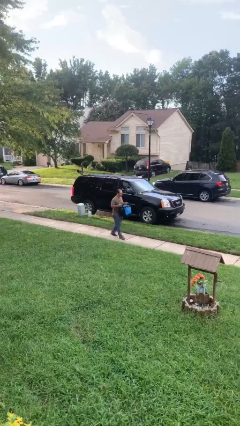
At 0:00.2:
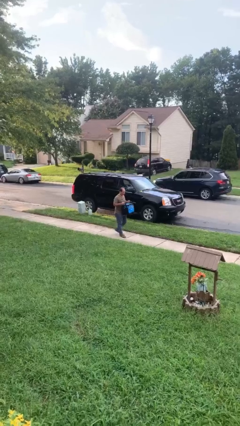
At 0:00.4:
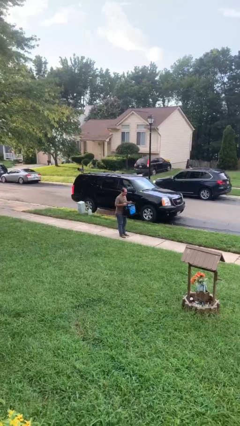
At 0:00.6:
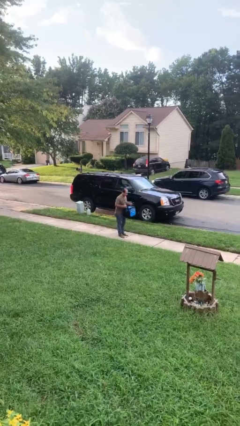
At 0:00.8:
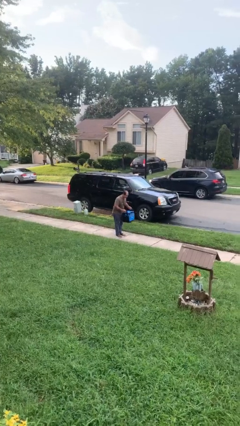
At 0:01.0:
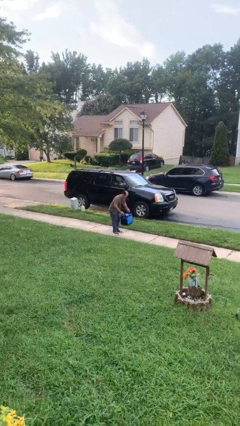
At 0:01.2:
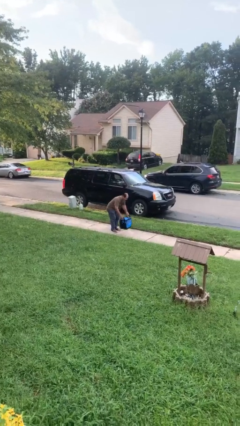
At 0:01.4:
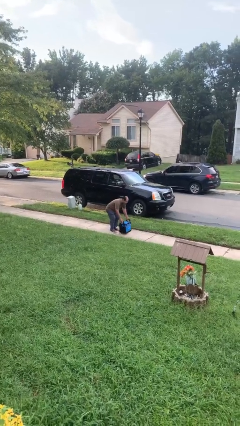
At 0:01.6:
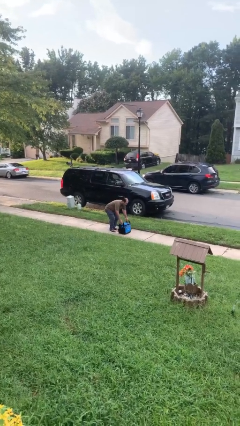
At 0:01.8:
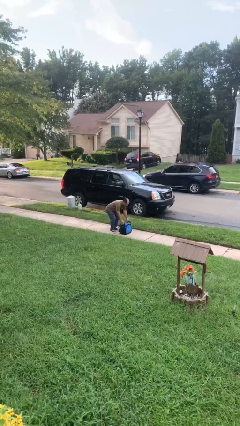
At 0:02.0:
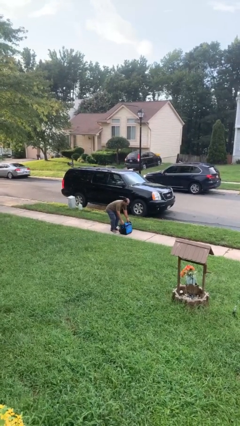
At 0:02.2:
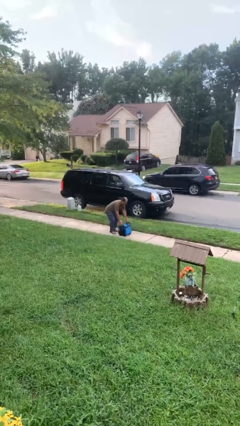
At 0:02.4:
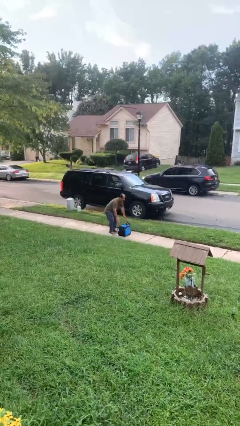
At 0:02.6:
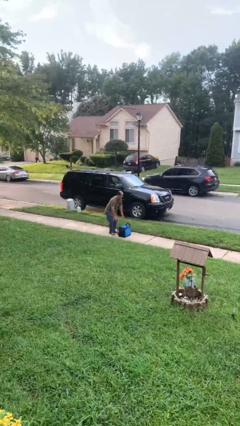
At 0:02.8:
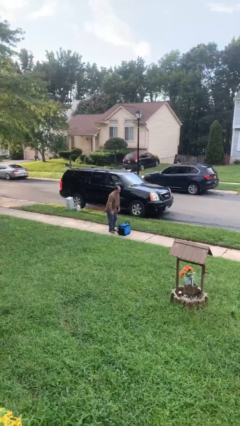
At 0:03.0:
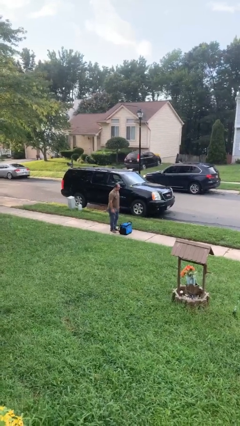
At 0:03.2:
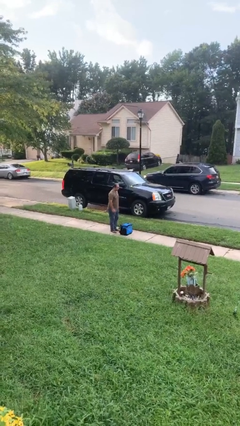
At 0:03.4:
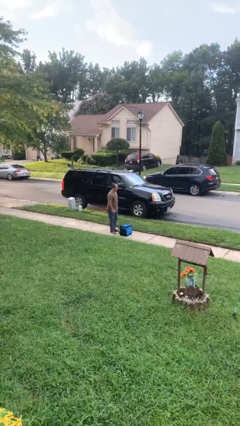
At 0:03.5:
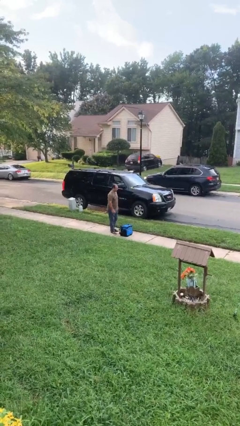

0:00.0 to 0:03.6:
person puts down object on floor

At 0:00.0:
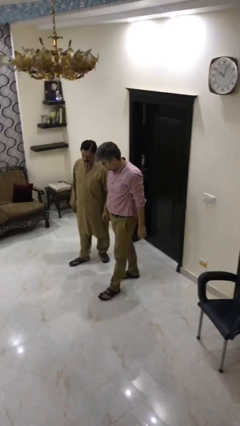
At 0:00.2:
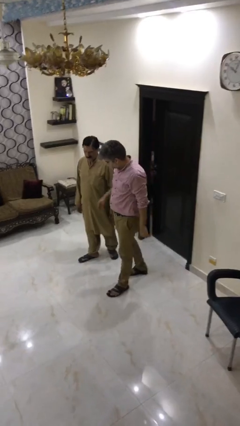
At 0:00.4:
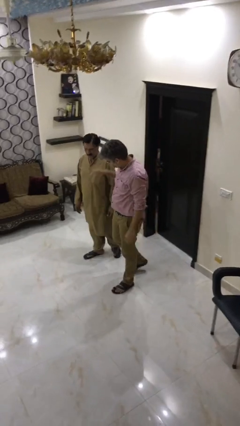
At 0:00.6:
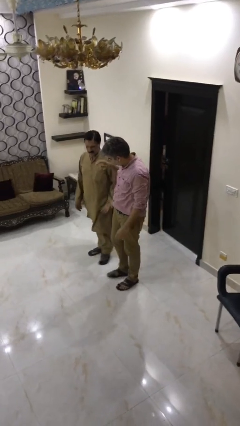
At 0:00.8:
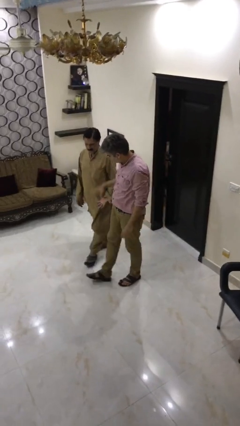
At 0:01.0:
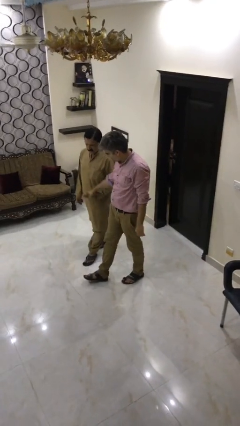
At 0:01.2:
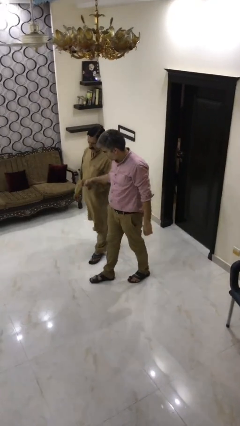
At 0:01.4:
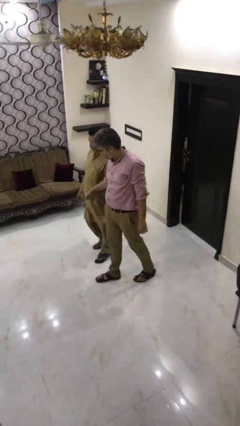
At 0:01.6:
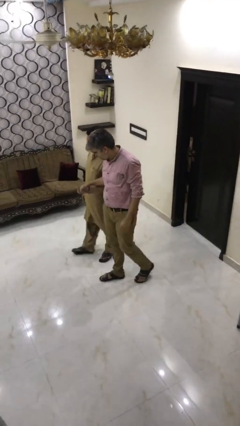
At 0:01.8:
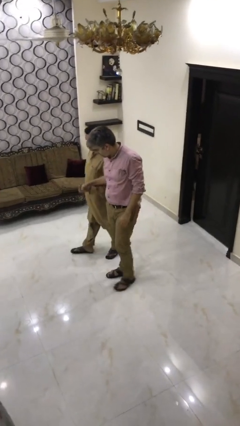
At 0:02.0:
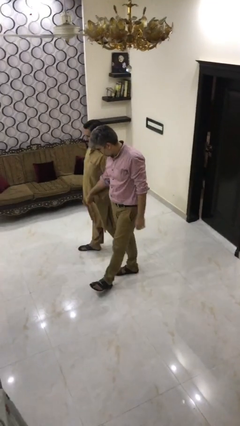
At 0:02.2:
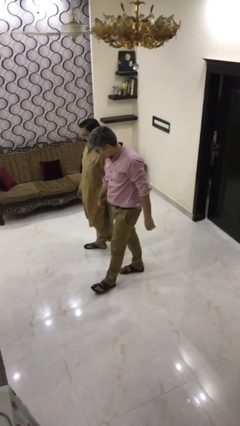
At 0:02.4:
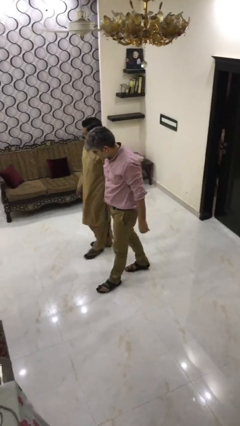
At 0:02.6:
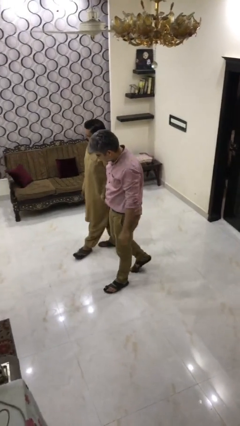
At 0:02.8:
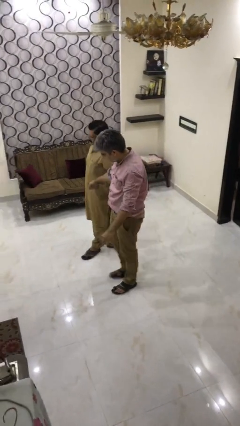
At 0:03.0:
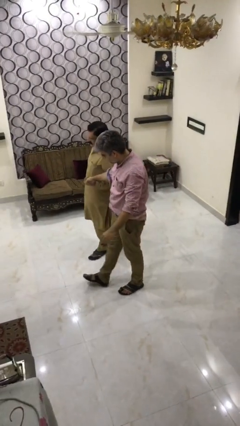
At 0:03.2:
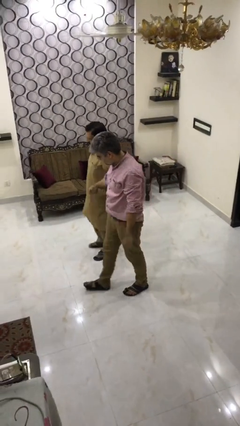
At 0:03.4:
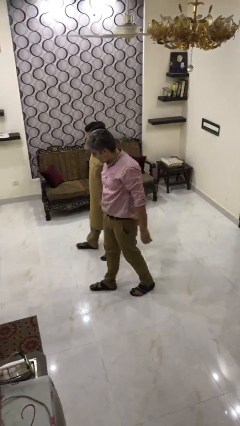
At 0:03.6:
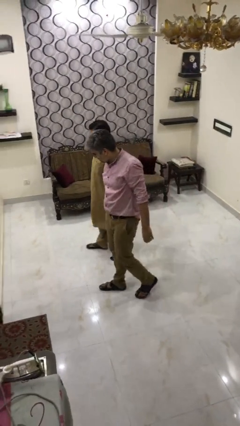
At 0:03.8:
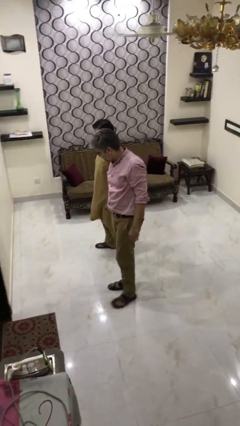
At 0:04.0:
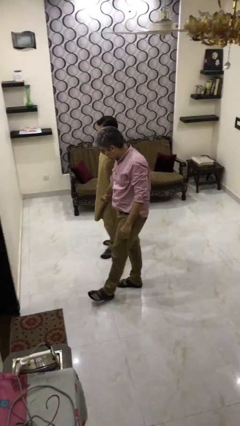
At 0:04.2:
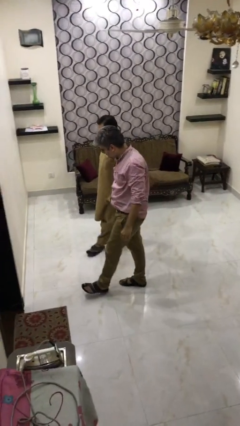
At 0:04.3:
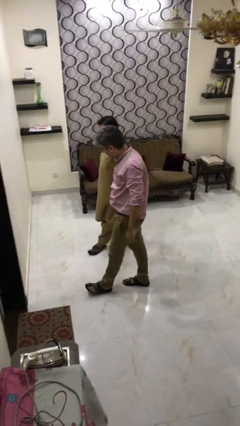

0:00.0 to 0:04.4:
person holds hand

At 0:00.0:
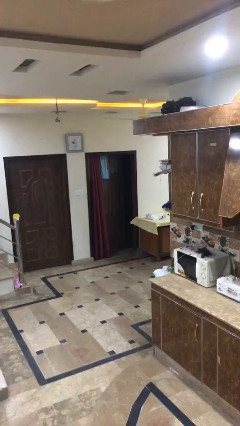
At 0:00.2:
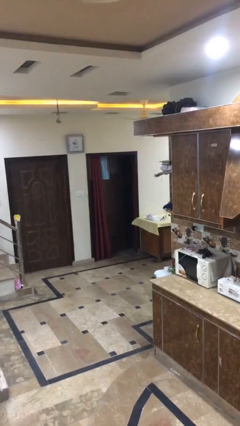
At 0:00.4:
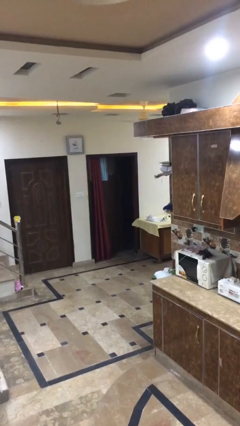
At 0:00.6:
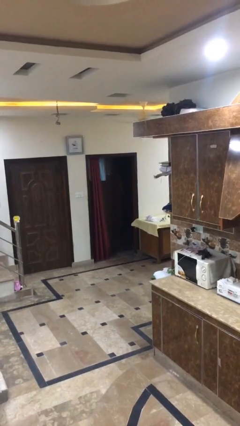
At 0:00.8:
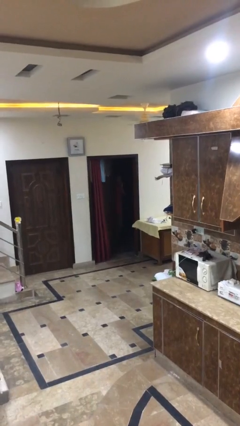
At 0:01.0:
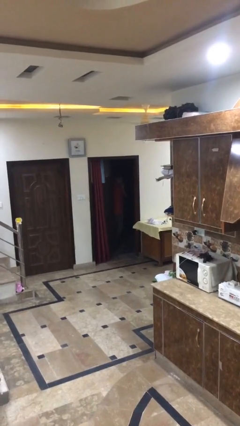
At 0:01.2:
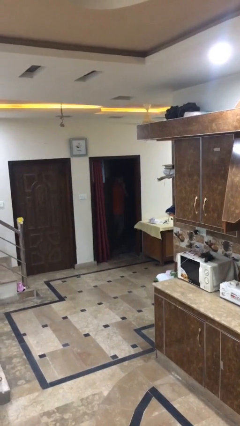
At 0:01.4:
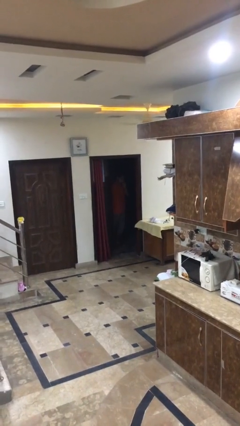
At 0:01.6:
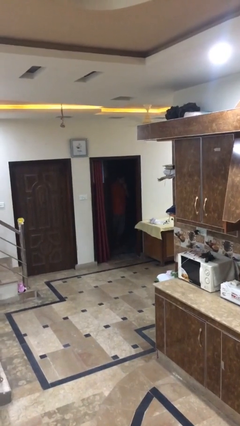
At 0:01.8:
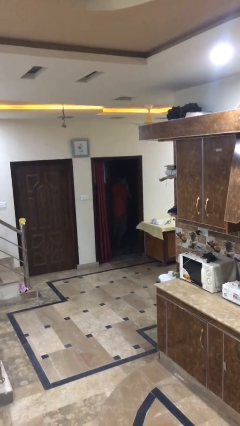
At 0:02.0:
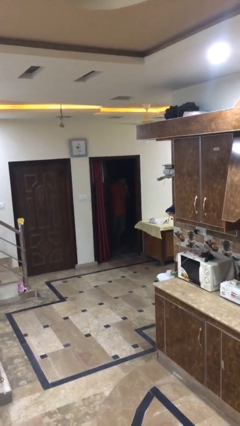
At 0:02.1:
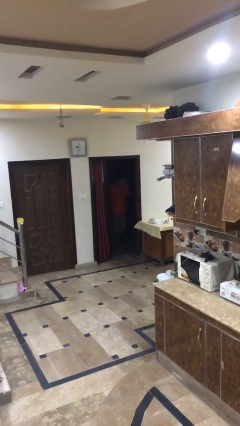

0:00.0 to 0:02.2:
person opens facility door

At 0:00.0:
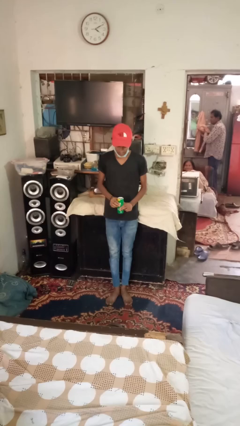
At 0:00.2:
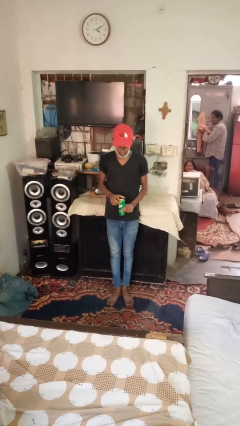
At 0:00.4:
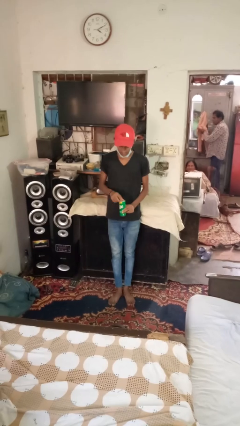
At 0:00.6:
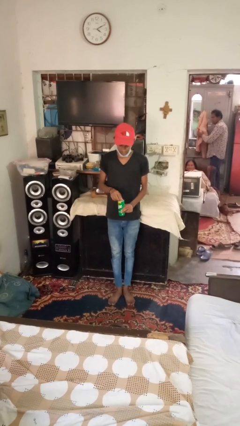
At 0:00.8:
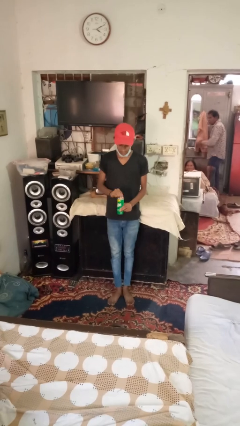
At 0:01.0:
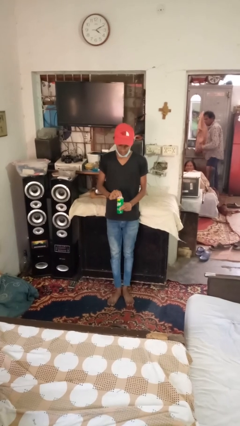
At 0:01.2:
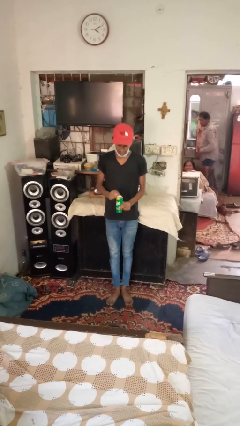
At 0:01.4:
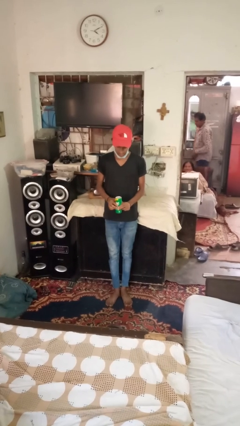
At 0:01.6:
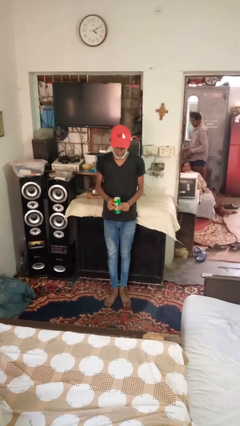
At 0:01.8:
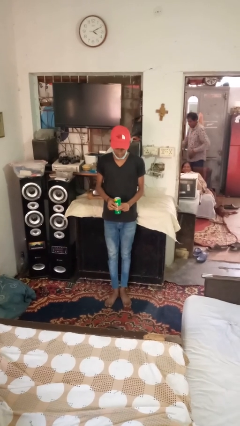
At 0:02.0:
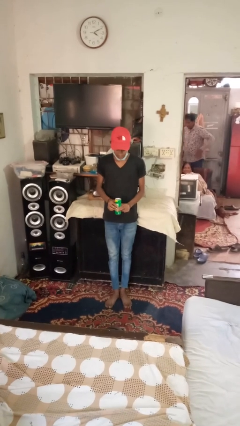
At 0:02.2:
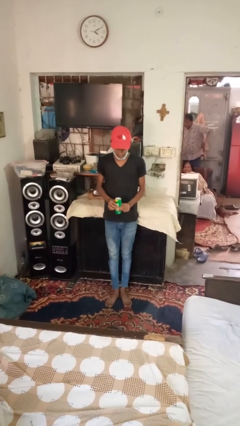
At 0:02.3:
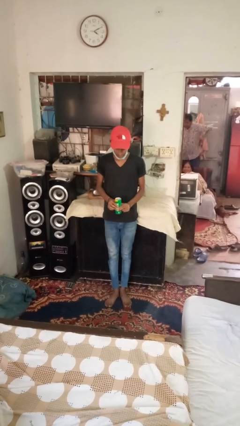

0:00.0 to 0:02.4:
person opens beverage can

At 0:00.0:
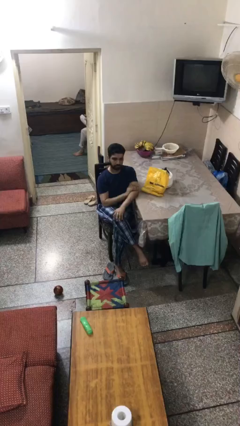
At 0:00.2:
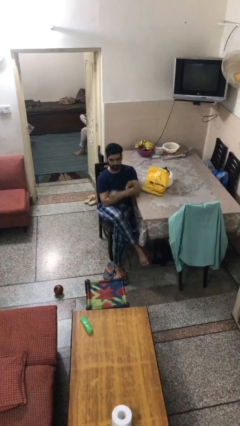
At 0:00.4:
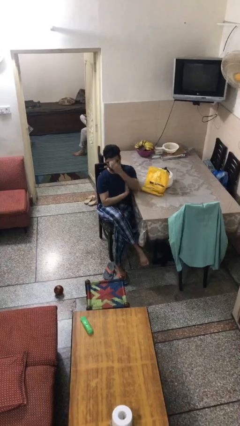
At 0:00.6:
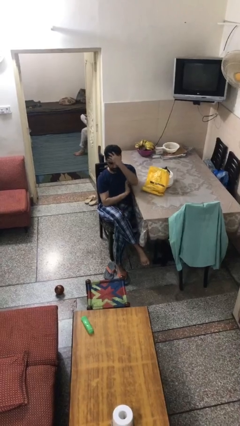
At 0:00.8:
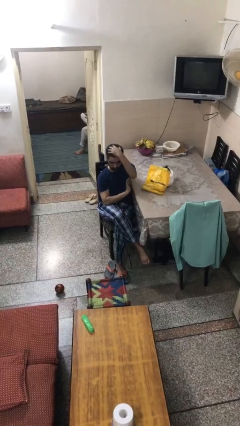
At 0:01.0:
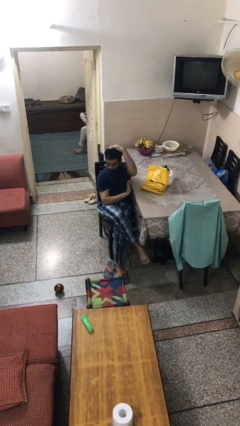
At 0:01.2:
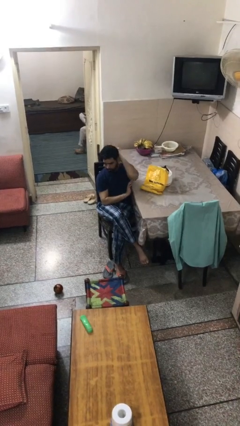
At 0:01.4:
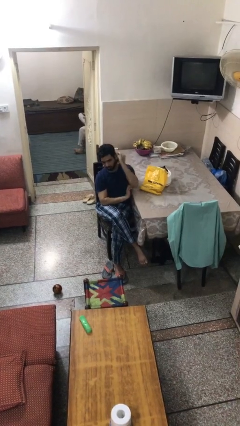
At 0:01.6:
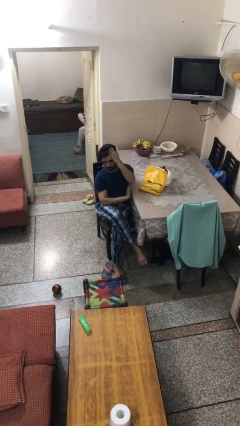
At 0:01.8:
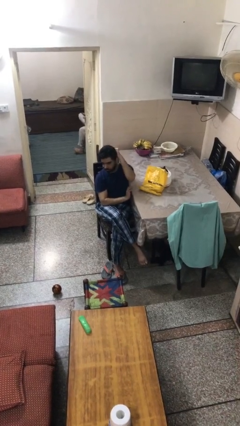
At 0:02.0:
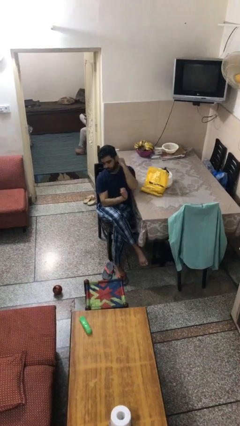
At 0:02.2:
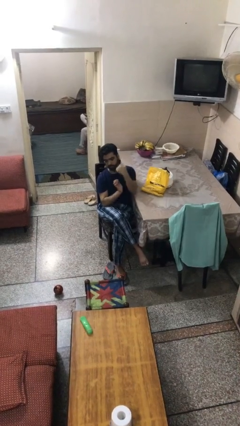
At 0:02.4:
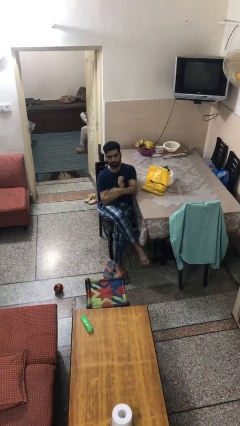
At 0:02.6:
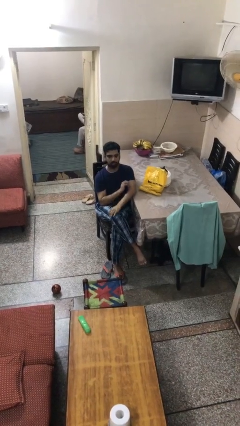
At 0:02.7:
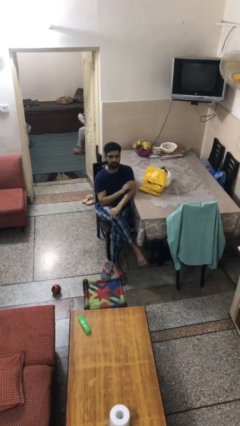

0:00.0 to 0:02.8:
person strokes hair

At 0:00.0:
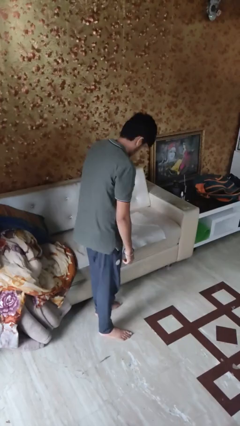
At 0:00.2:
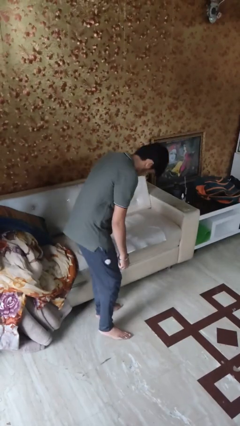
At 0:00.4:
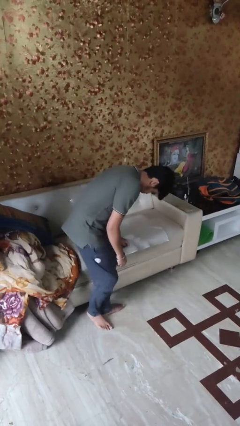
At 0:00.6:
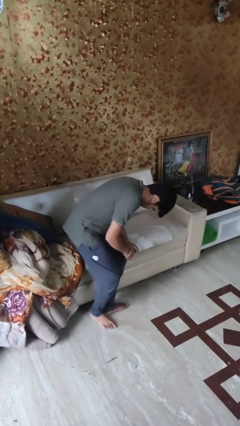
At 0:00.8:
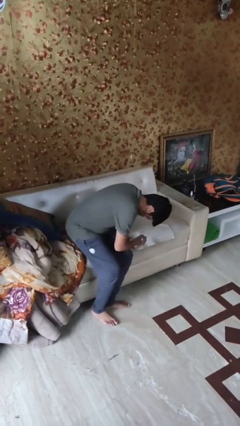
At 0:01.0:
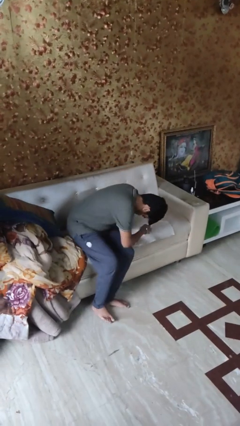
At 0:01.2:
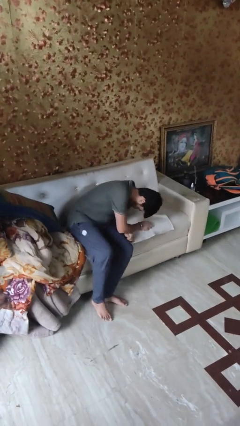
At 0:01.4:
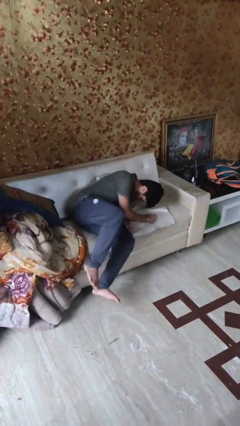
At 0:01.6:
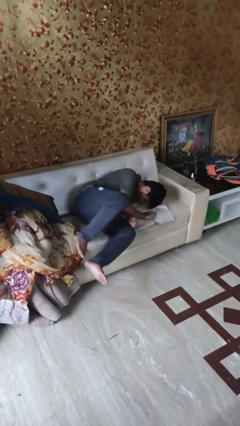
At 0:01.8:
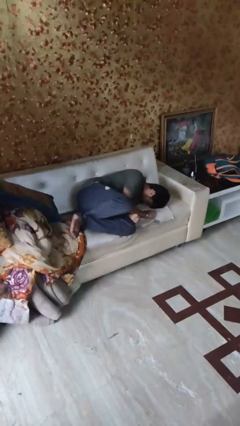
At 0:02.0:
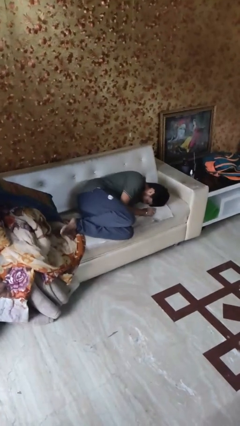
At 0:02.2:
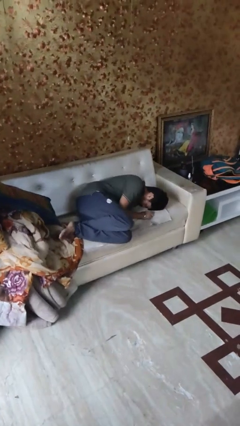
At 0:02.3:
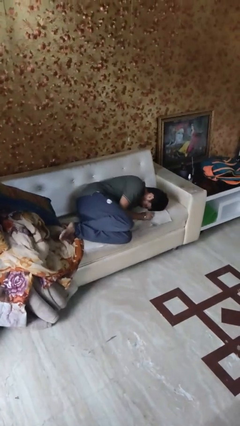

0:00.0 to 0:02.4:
person lies down on couch
